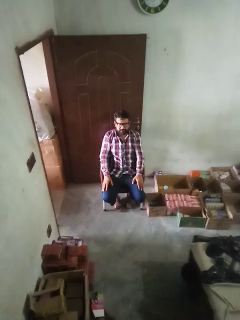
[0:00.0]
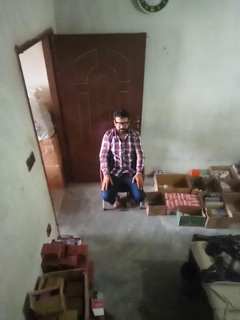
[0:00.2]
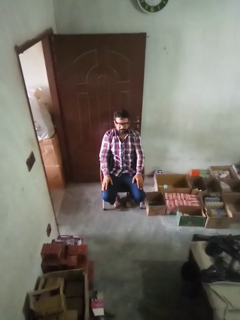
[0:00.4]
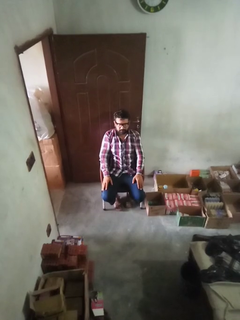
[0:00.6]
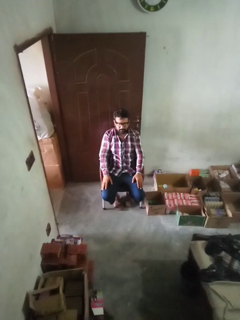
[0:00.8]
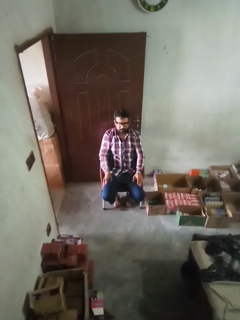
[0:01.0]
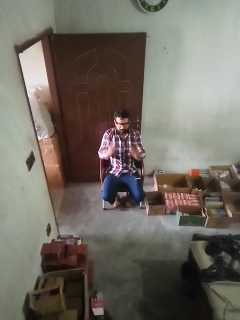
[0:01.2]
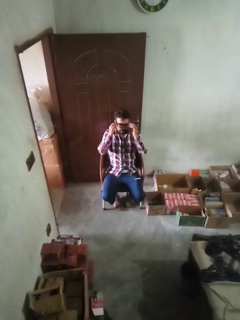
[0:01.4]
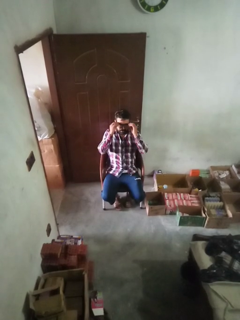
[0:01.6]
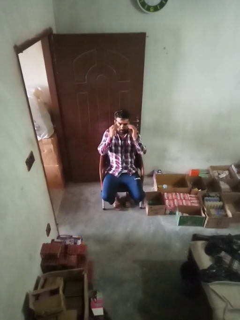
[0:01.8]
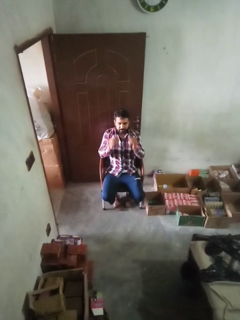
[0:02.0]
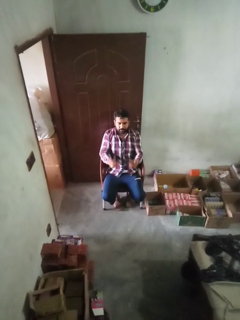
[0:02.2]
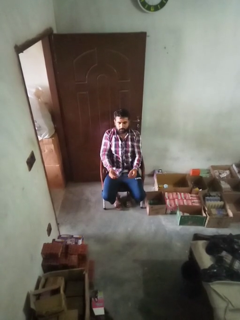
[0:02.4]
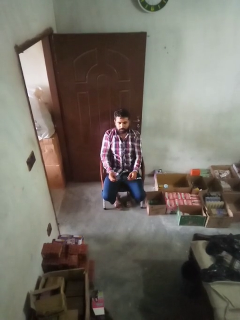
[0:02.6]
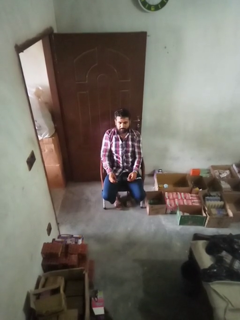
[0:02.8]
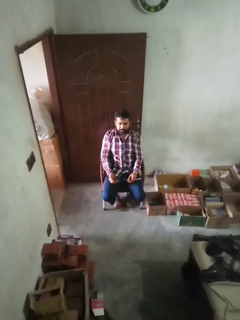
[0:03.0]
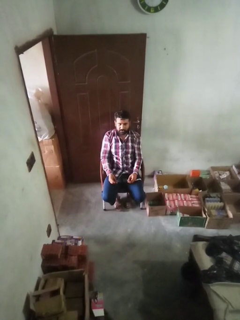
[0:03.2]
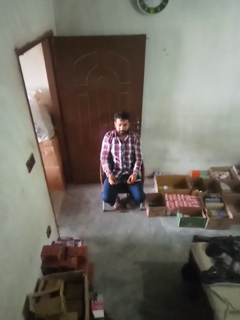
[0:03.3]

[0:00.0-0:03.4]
person takes off glasses

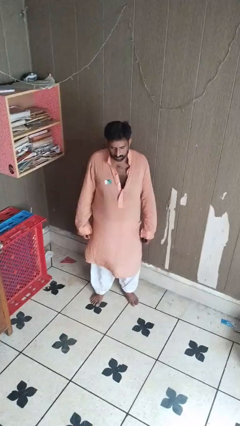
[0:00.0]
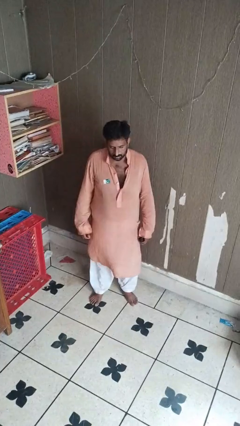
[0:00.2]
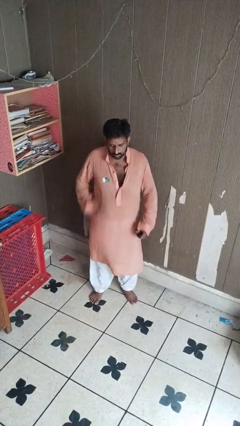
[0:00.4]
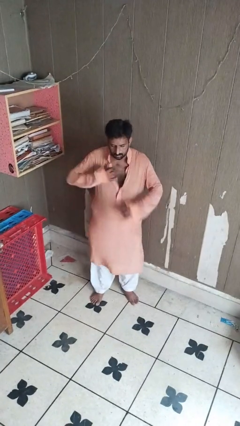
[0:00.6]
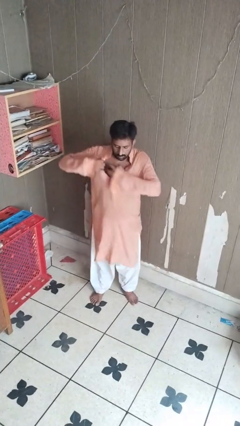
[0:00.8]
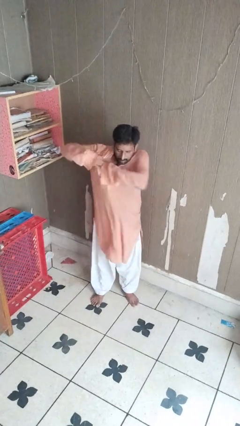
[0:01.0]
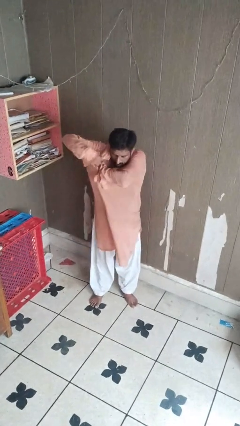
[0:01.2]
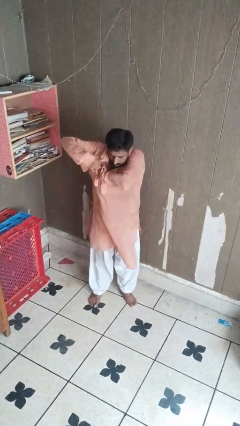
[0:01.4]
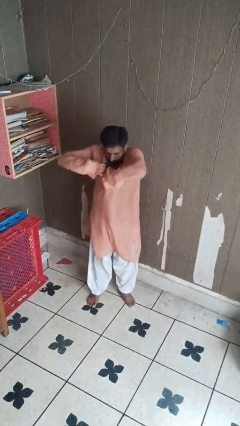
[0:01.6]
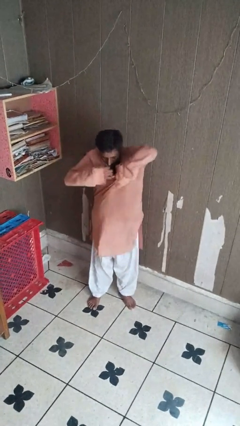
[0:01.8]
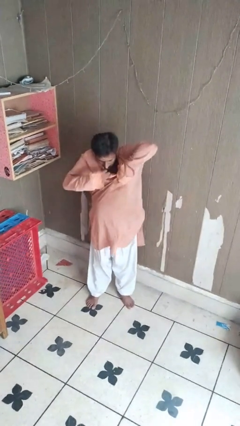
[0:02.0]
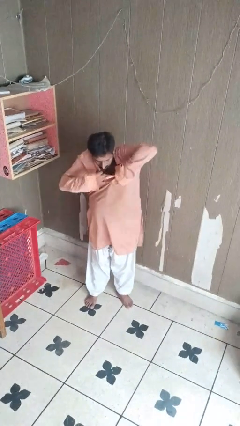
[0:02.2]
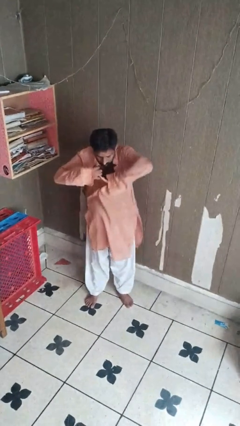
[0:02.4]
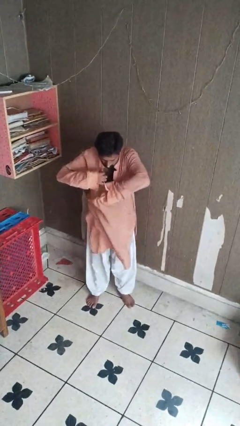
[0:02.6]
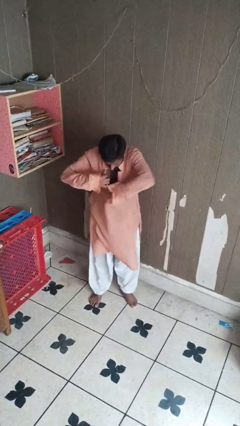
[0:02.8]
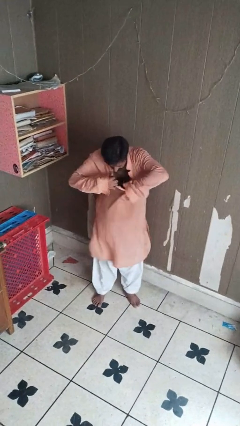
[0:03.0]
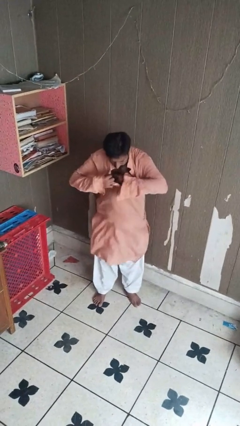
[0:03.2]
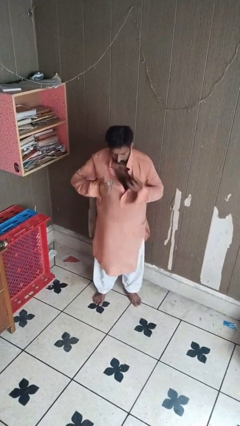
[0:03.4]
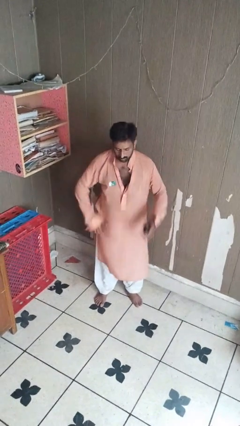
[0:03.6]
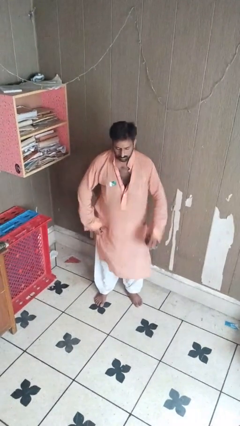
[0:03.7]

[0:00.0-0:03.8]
person applies deodorant

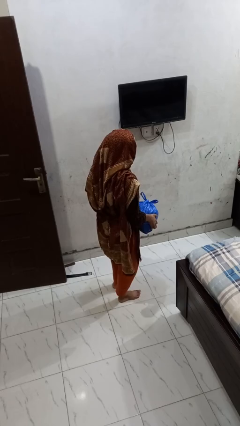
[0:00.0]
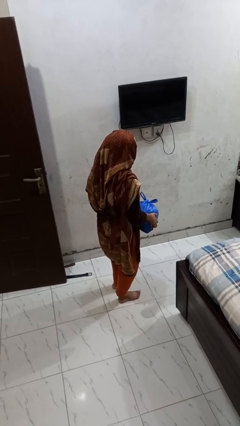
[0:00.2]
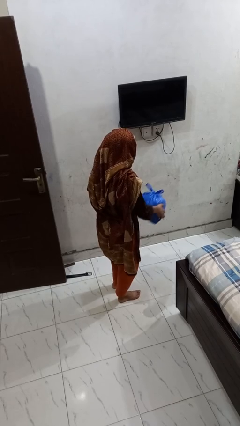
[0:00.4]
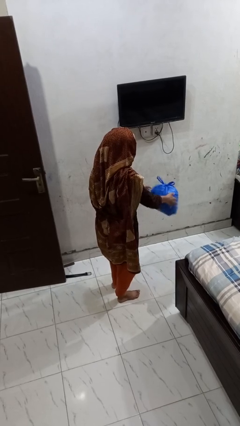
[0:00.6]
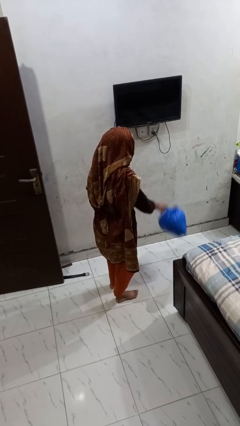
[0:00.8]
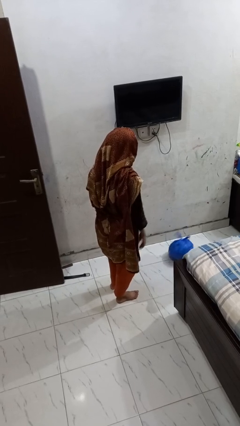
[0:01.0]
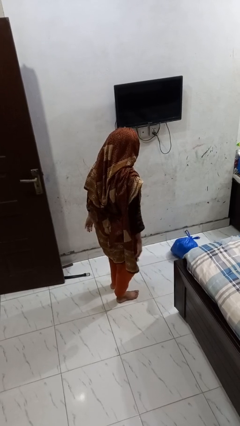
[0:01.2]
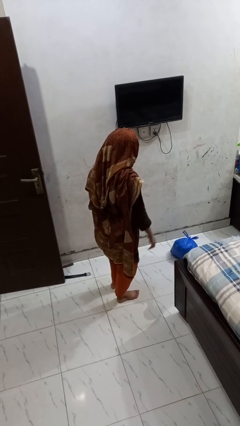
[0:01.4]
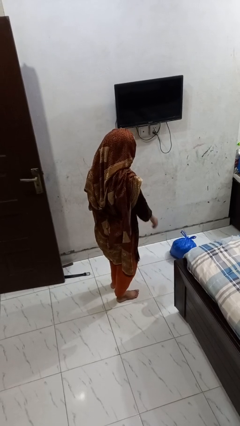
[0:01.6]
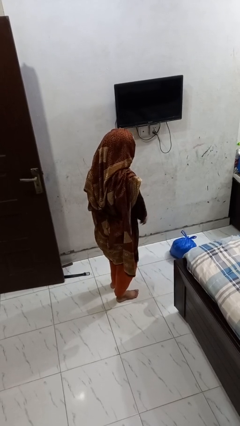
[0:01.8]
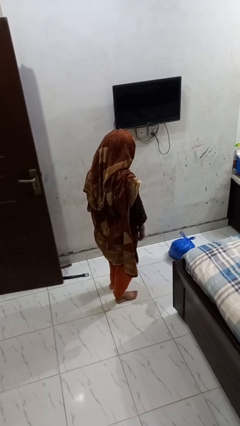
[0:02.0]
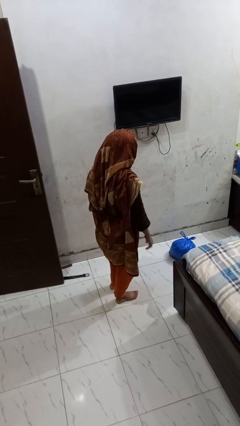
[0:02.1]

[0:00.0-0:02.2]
person throws object to ground

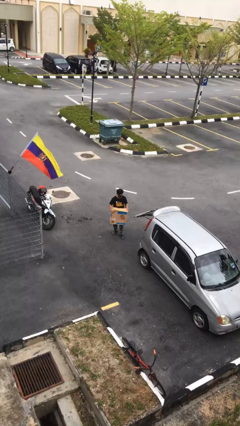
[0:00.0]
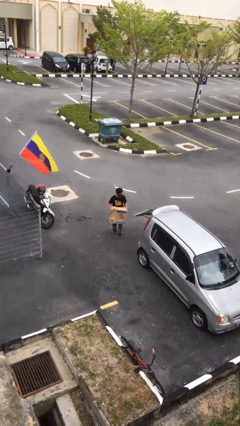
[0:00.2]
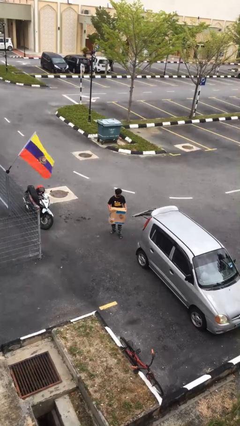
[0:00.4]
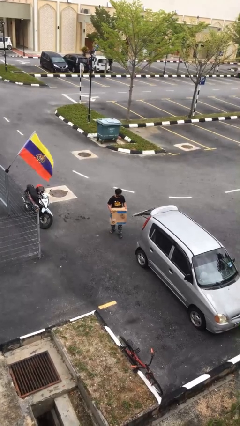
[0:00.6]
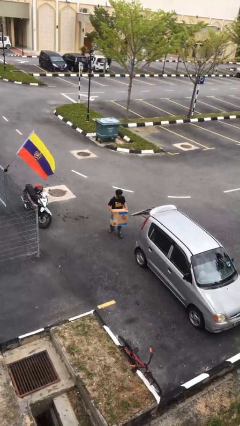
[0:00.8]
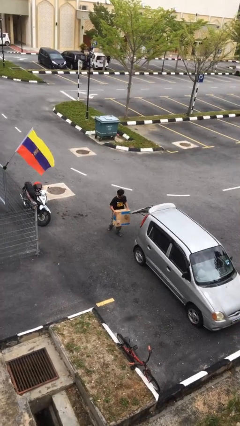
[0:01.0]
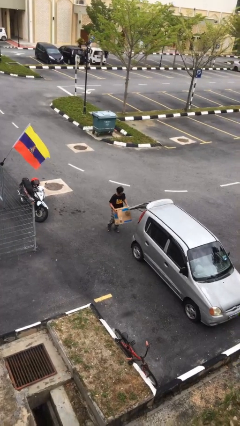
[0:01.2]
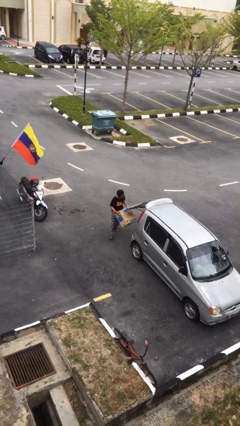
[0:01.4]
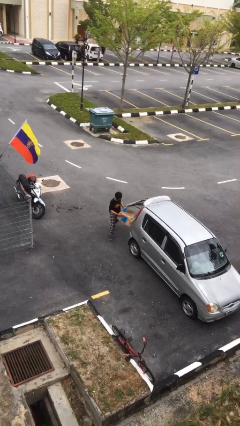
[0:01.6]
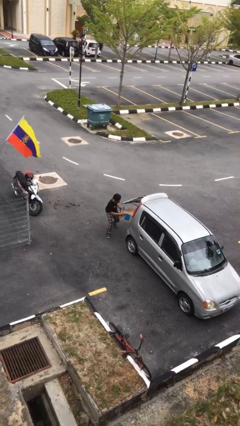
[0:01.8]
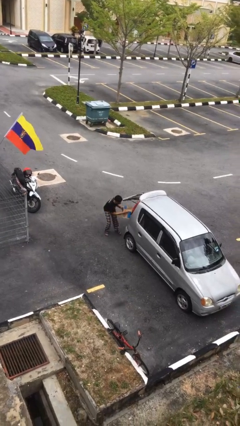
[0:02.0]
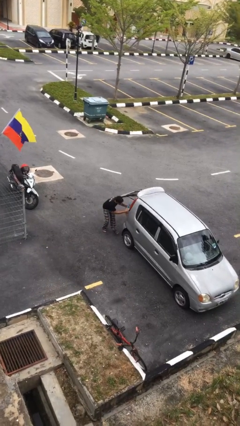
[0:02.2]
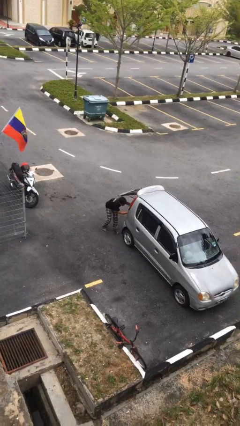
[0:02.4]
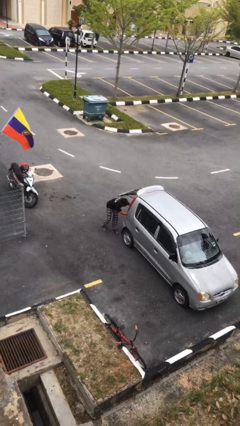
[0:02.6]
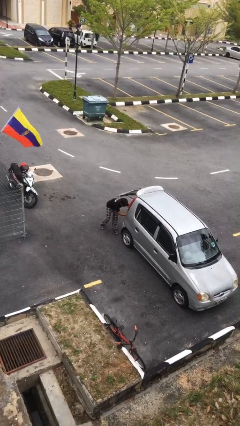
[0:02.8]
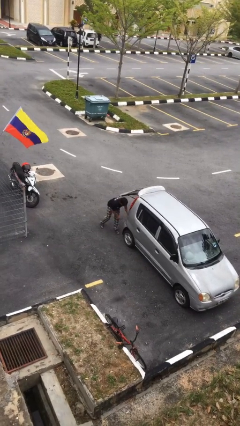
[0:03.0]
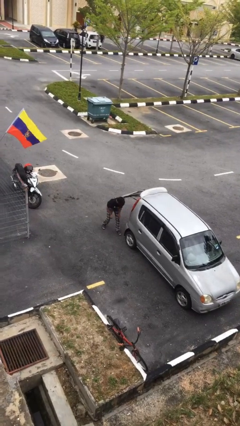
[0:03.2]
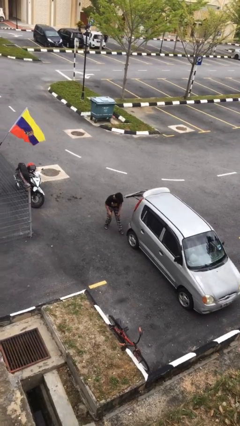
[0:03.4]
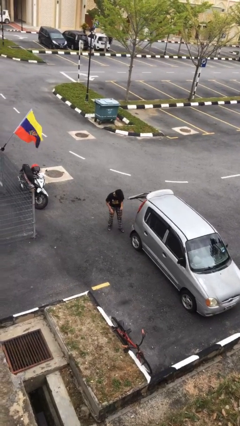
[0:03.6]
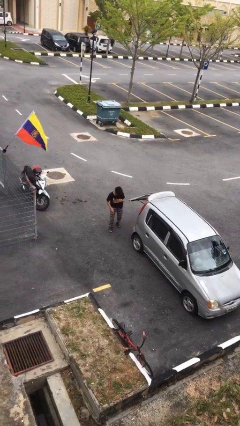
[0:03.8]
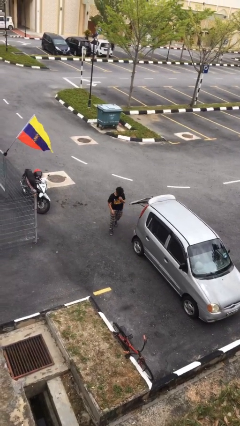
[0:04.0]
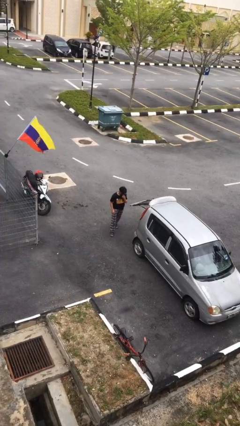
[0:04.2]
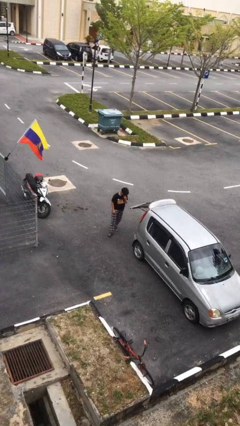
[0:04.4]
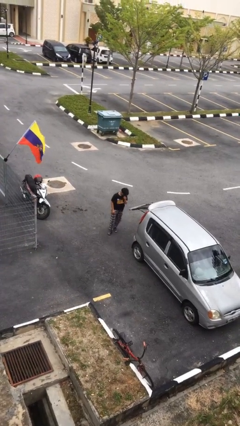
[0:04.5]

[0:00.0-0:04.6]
person loads car

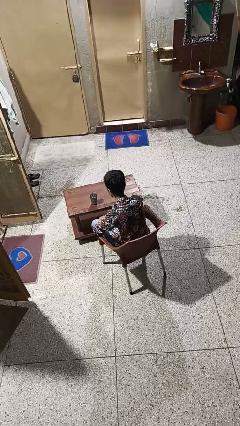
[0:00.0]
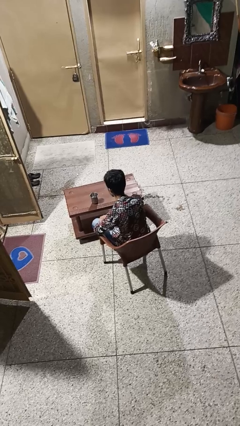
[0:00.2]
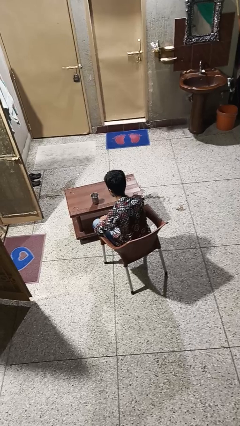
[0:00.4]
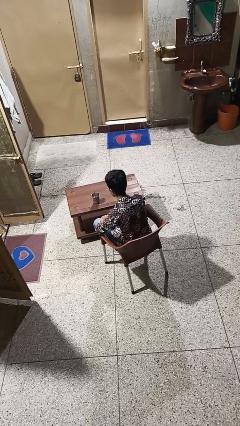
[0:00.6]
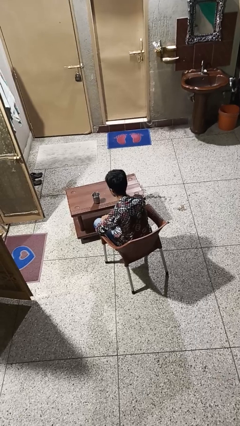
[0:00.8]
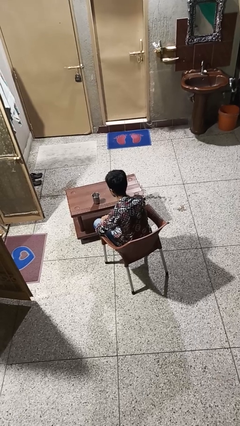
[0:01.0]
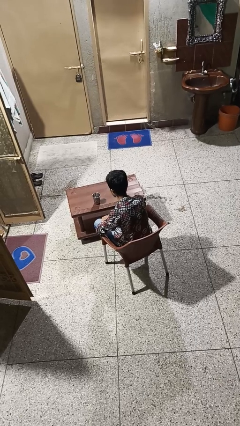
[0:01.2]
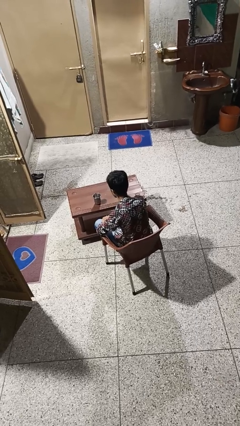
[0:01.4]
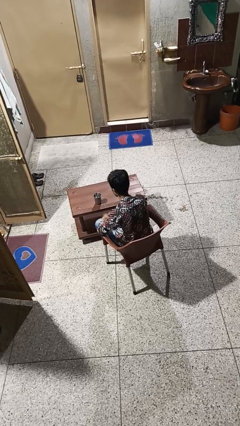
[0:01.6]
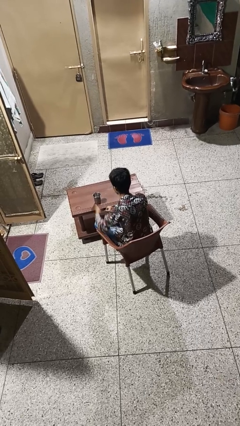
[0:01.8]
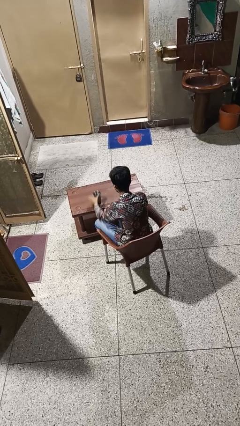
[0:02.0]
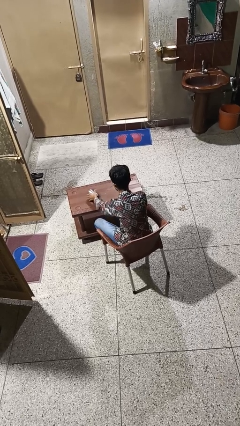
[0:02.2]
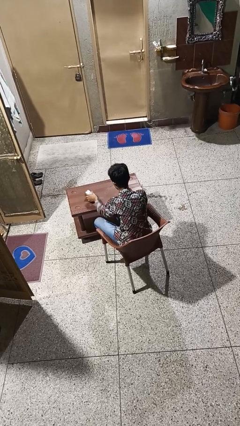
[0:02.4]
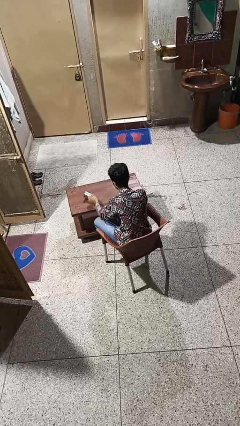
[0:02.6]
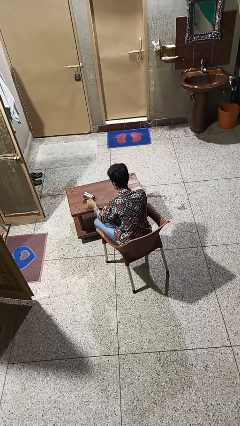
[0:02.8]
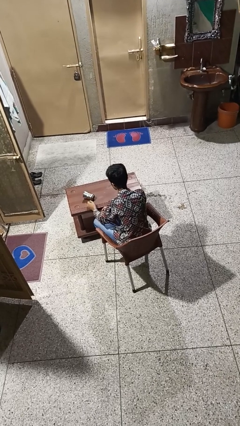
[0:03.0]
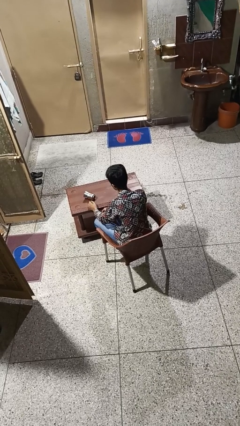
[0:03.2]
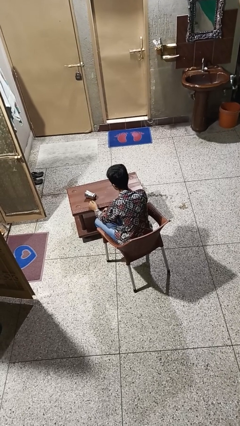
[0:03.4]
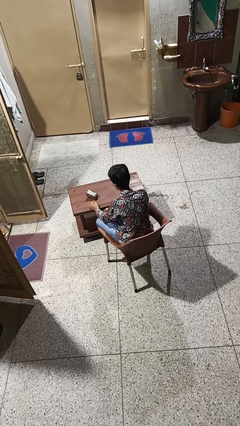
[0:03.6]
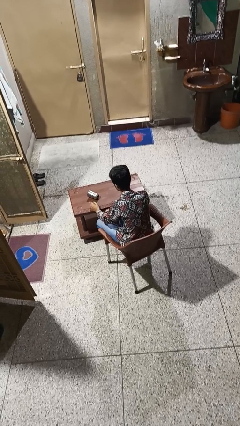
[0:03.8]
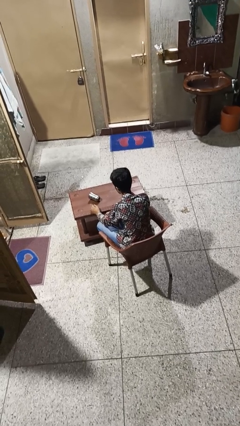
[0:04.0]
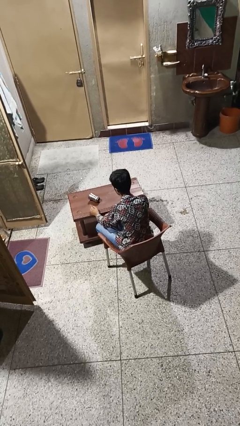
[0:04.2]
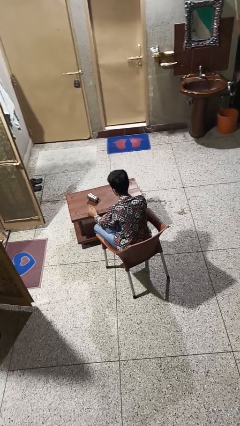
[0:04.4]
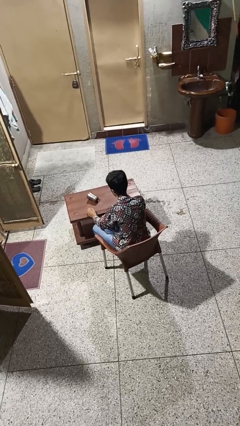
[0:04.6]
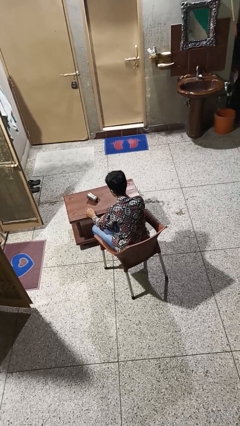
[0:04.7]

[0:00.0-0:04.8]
person knocks over glass
